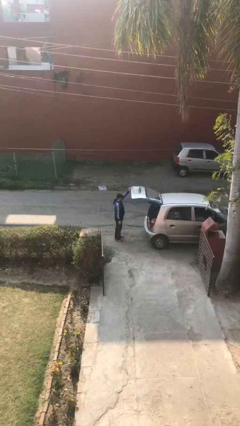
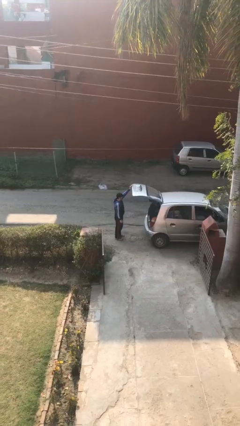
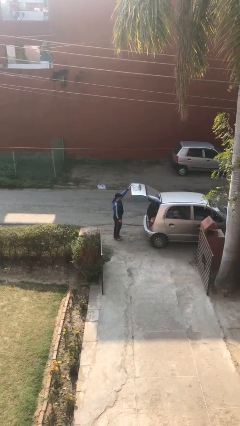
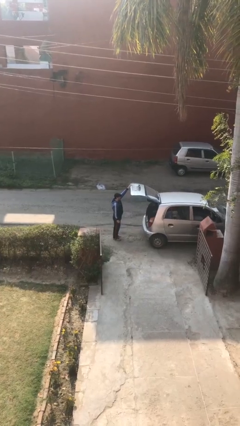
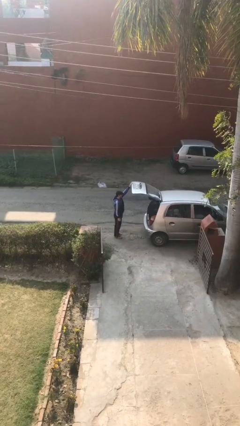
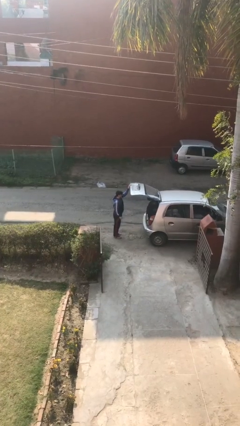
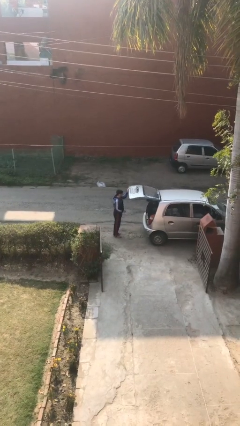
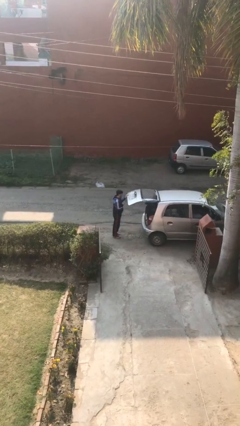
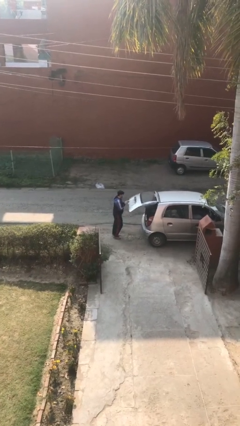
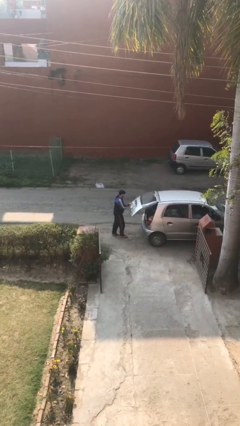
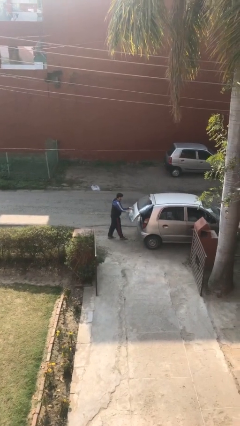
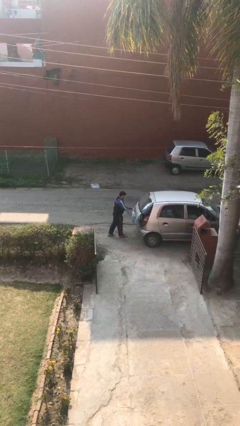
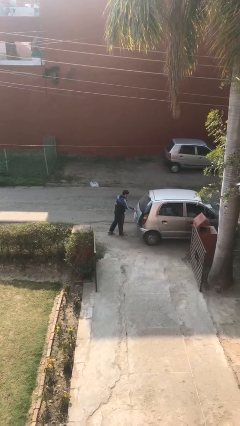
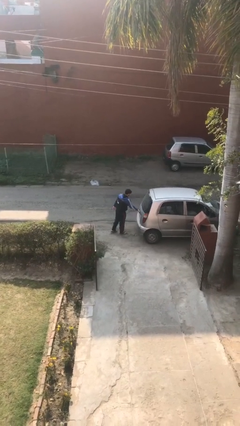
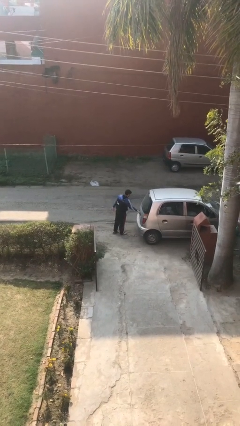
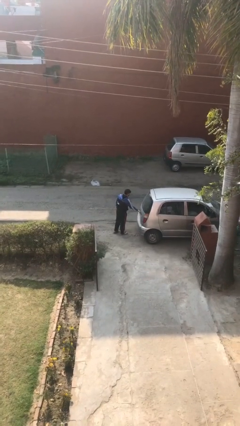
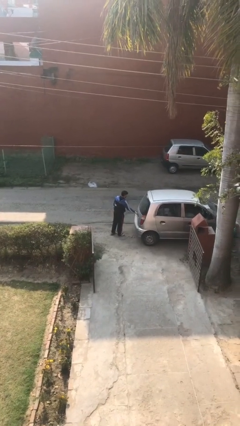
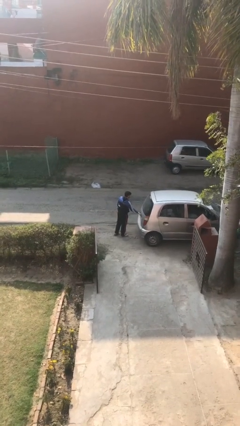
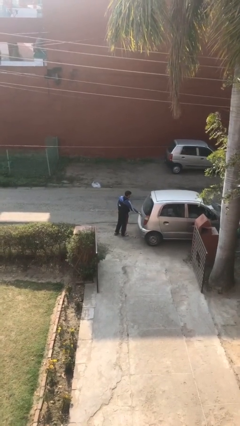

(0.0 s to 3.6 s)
person closes car trunk

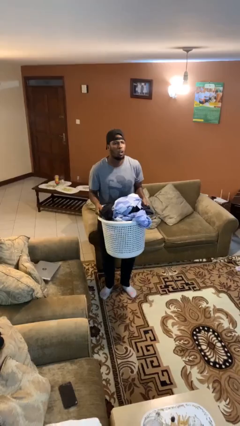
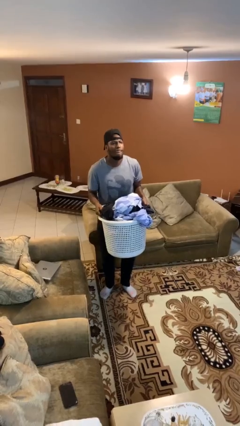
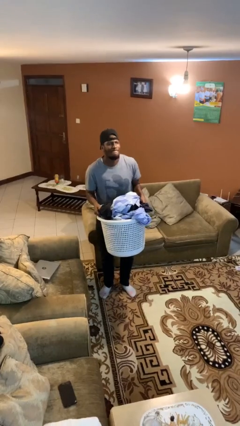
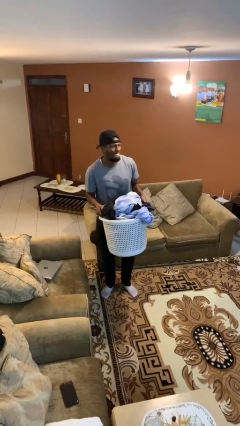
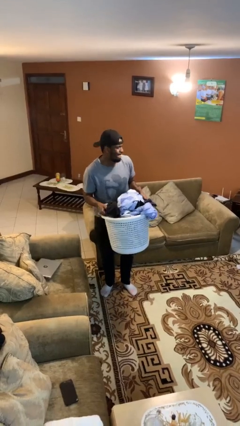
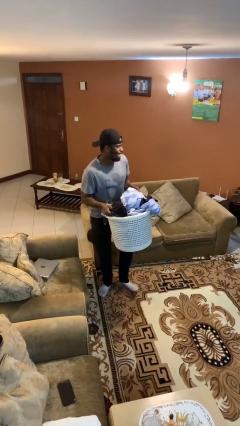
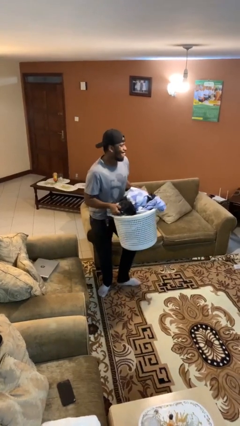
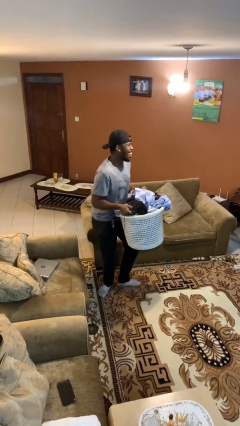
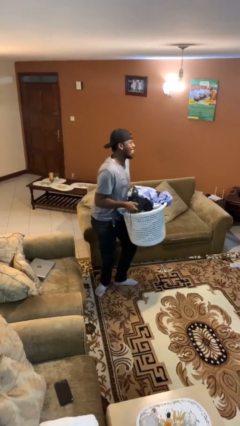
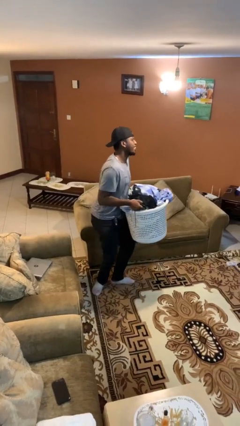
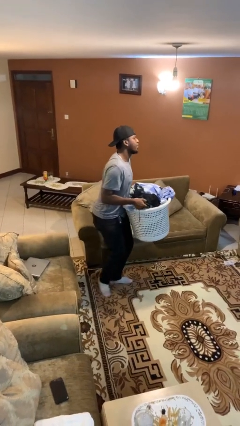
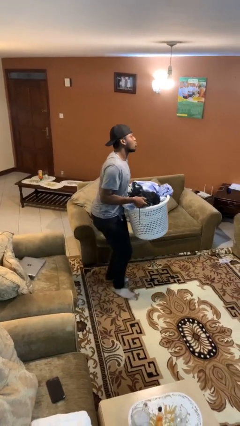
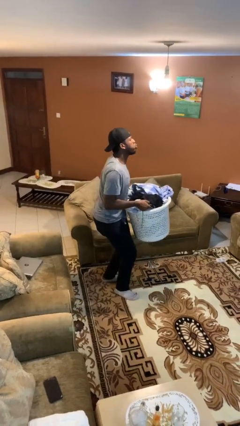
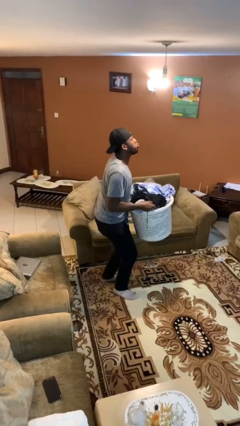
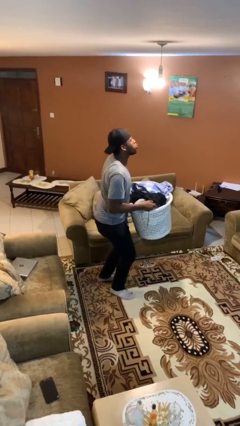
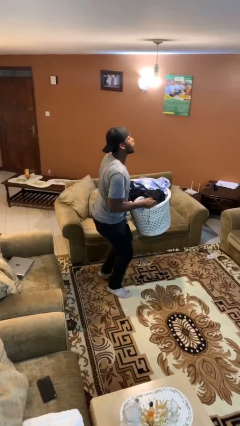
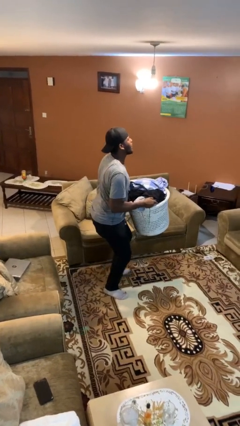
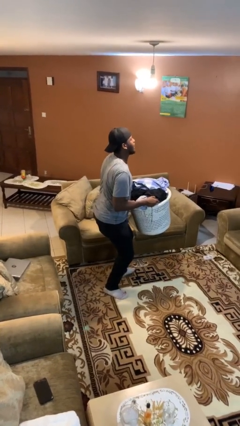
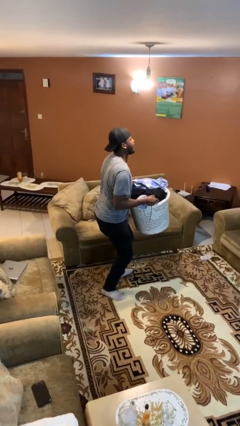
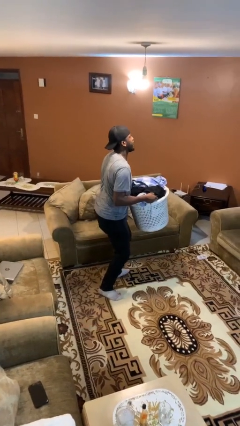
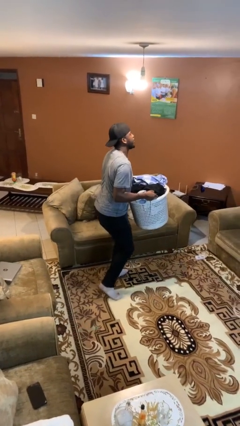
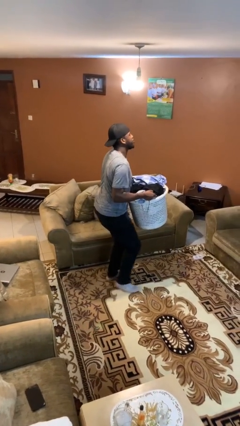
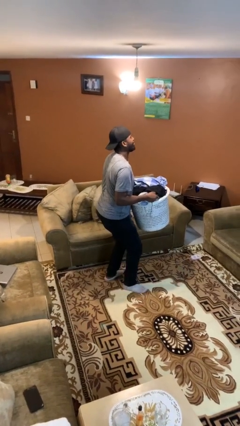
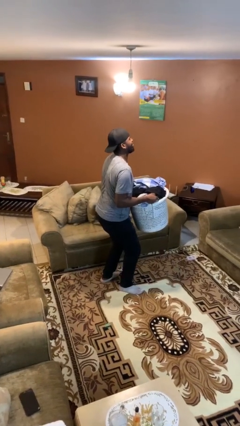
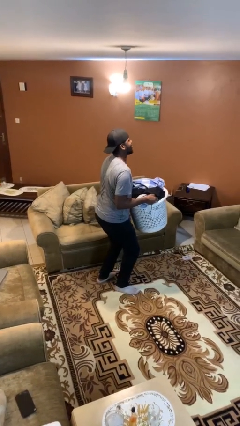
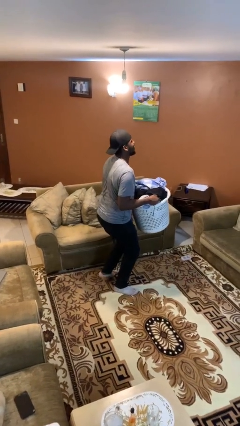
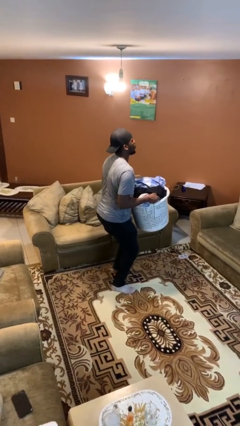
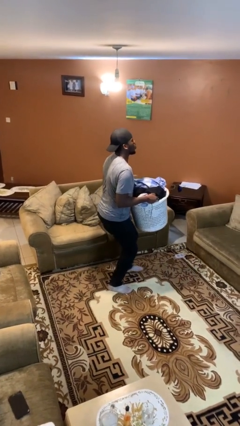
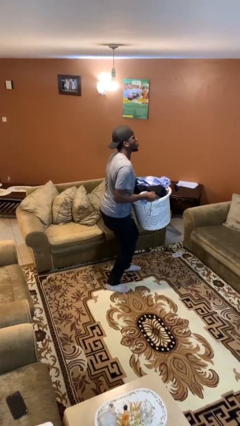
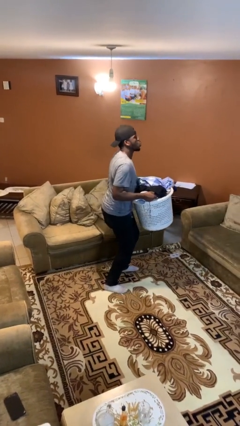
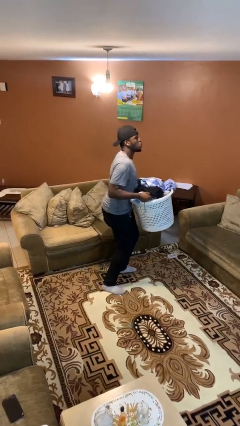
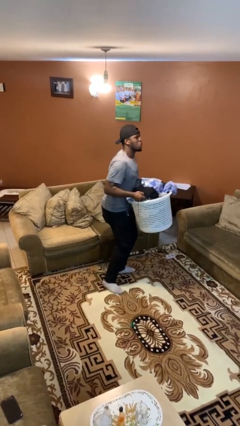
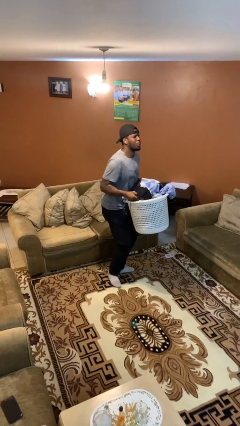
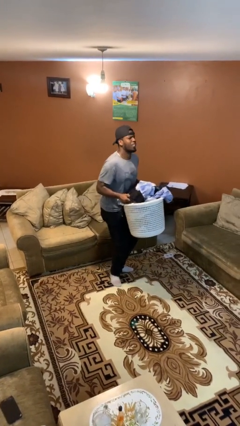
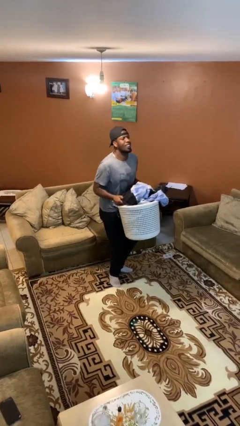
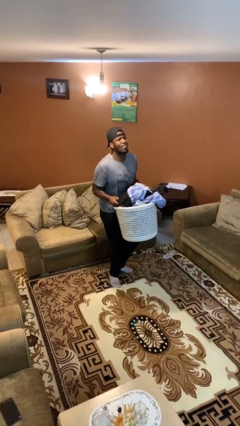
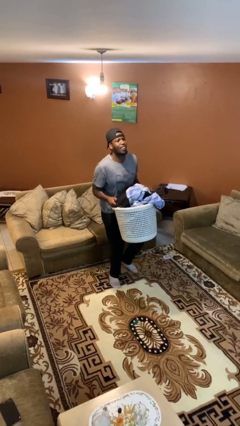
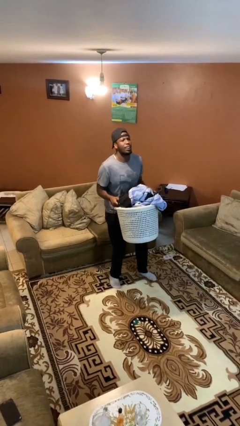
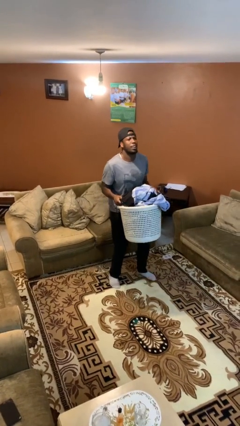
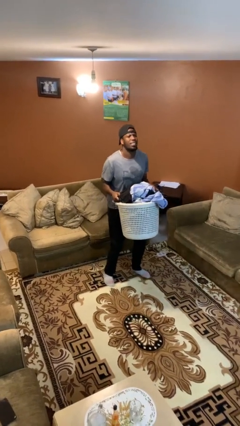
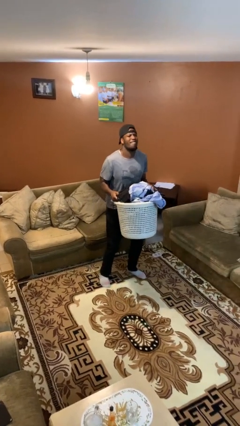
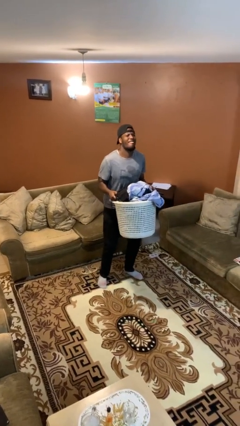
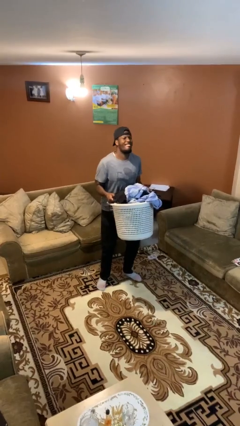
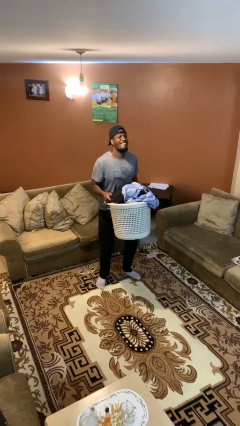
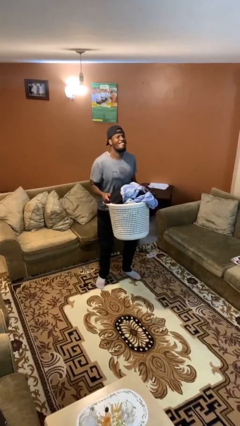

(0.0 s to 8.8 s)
person carries heavy object

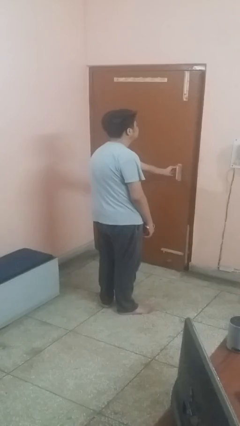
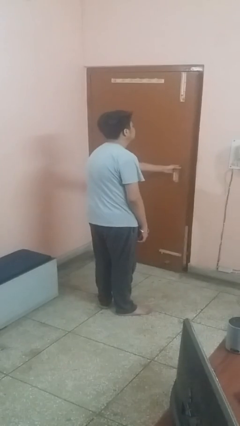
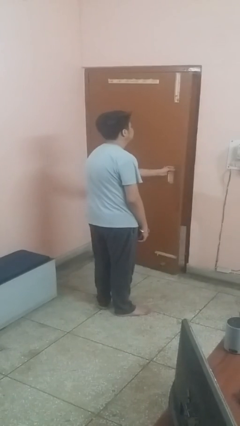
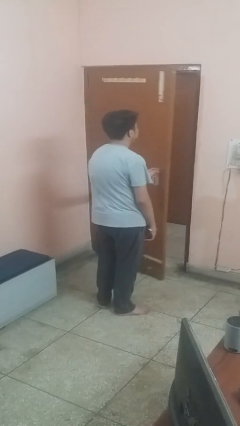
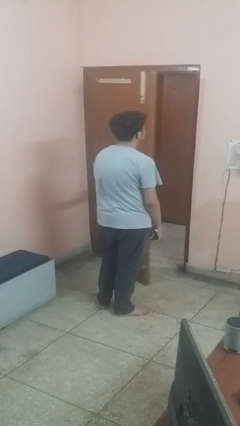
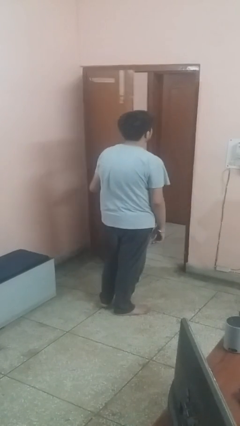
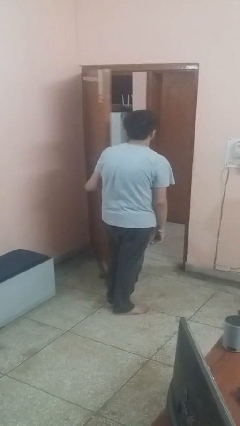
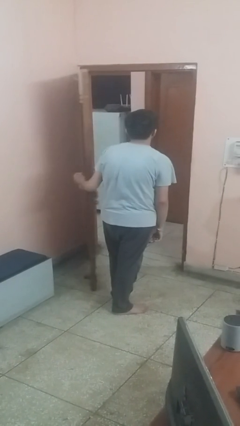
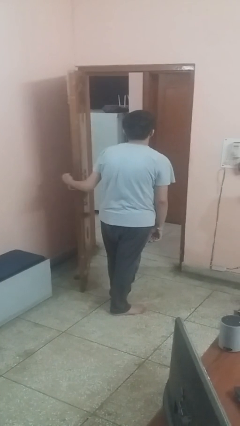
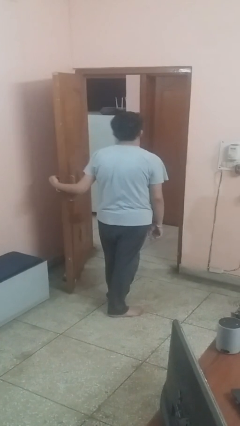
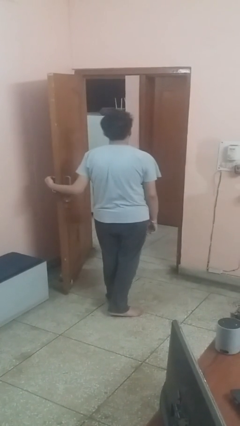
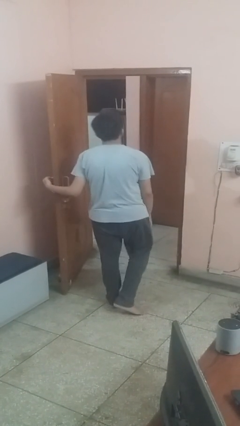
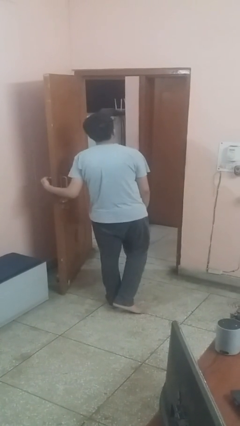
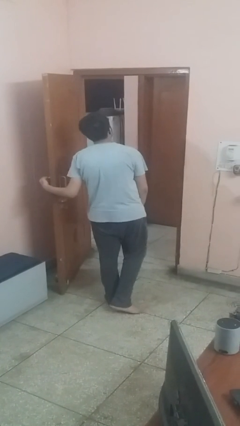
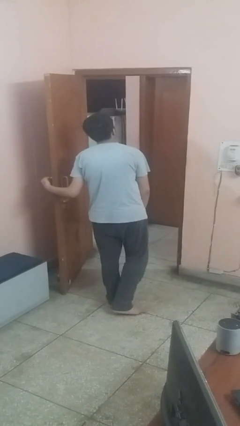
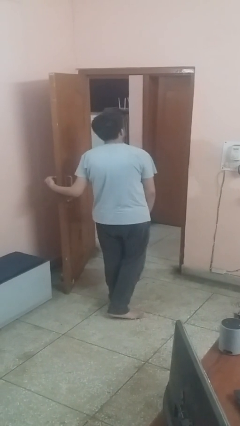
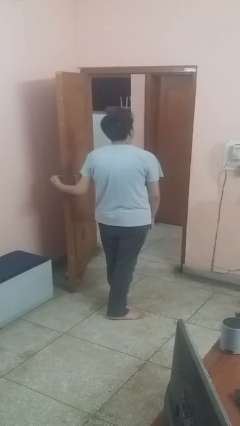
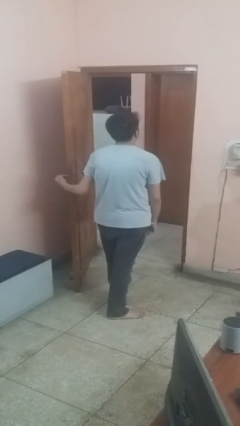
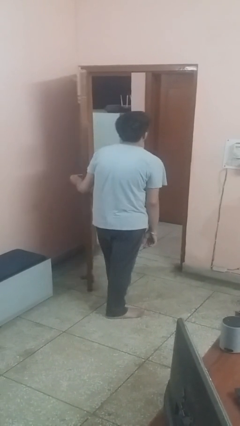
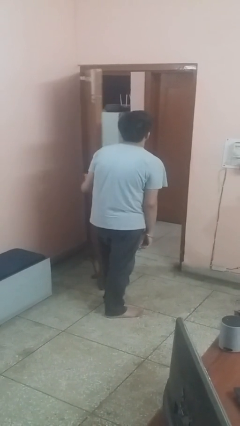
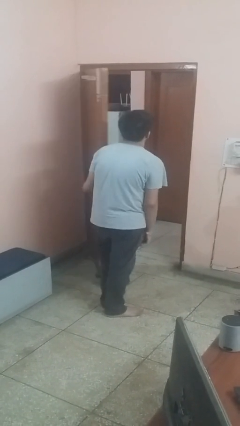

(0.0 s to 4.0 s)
person opens facility door

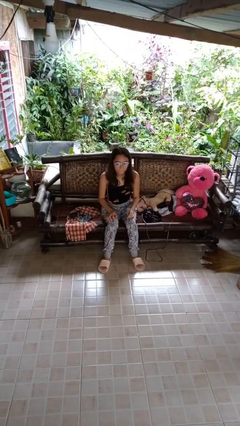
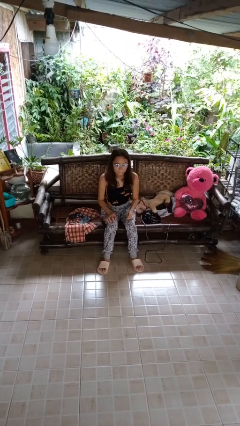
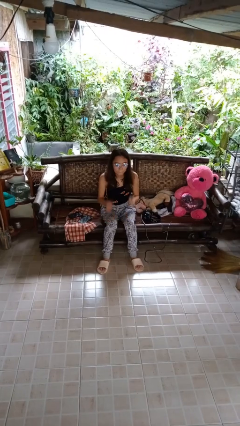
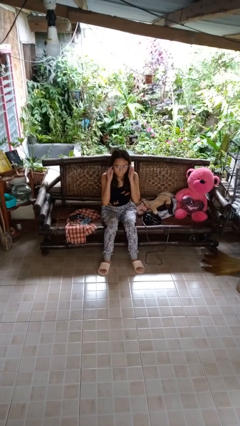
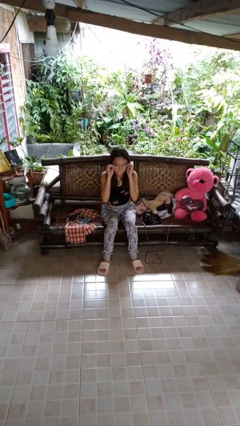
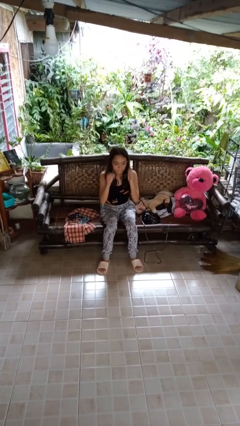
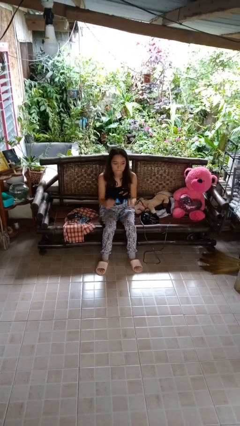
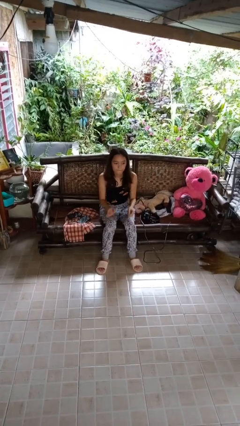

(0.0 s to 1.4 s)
person takes off glasses

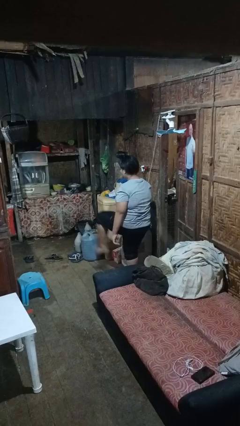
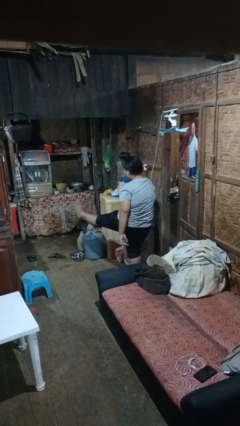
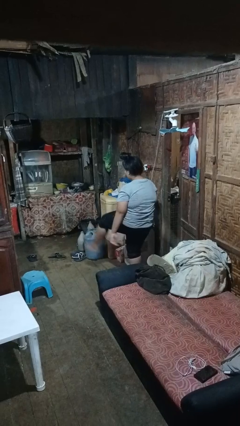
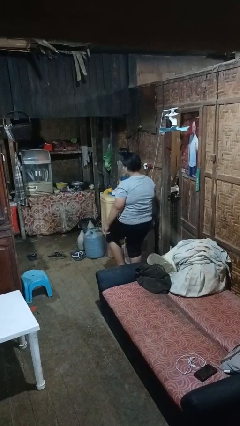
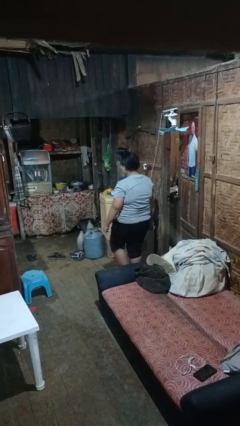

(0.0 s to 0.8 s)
person karate kicks
